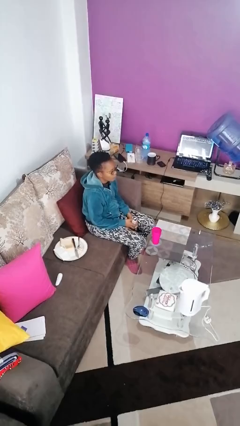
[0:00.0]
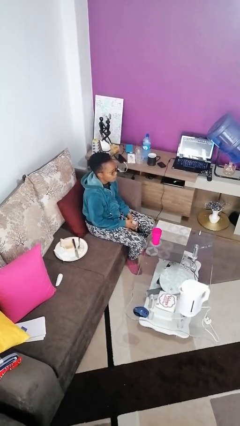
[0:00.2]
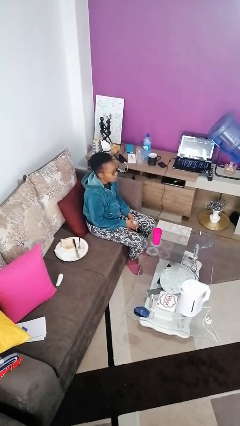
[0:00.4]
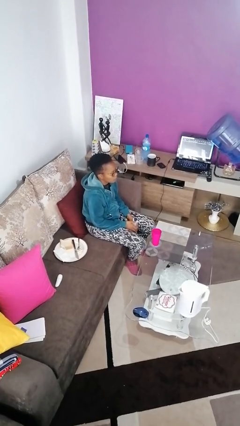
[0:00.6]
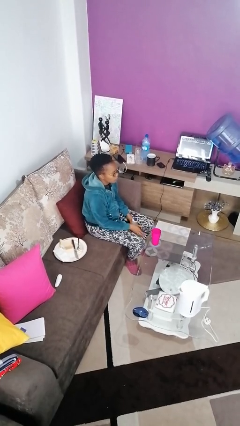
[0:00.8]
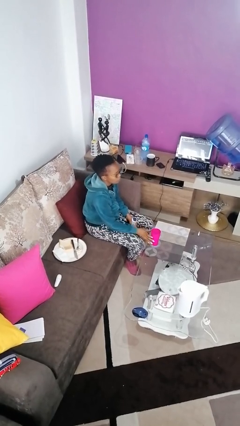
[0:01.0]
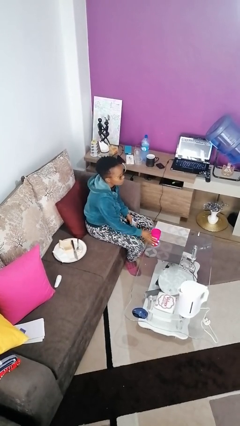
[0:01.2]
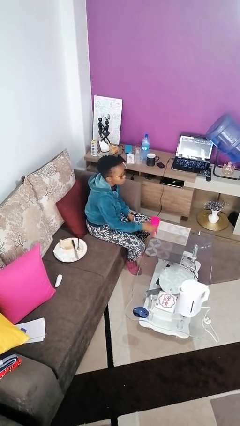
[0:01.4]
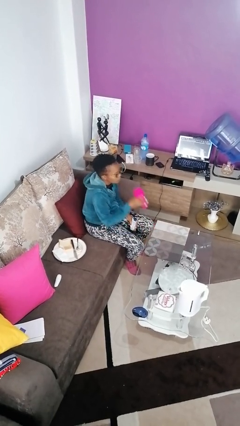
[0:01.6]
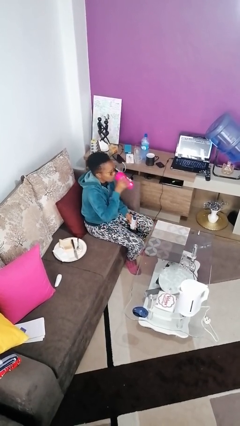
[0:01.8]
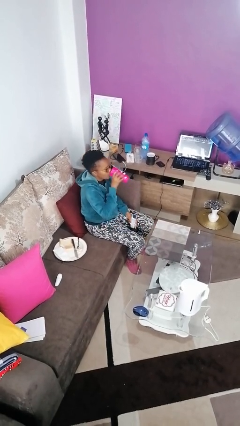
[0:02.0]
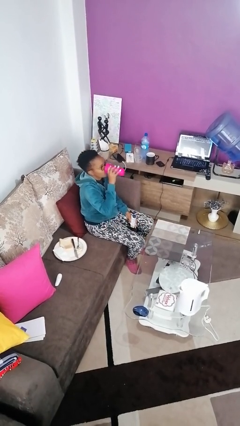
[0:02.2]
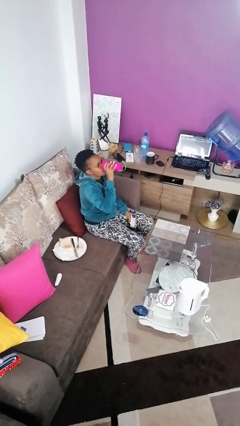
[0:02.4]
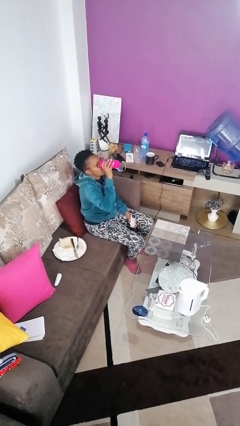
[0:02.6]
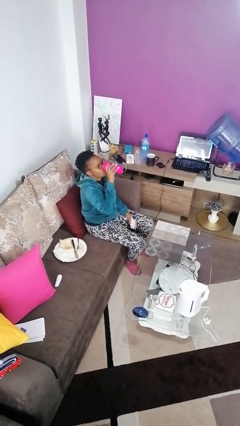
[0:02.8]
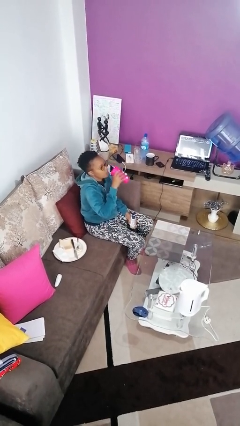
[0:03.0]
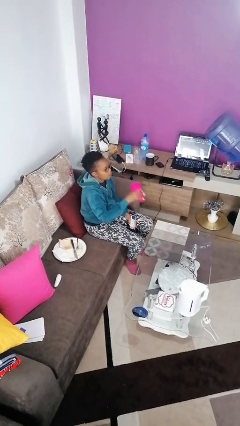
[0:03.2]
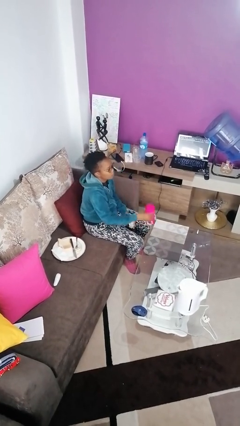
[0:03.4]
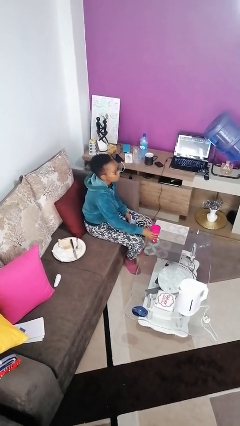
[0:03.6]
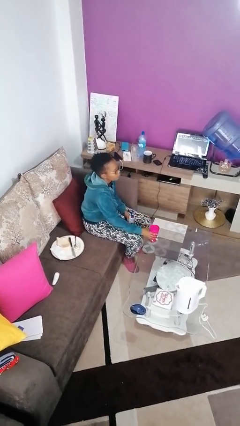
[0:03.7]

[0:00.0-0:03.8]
person drinks from cup

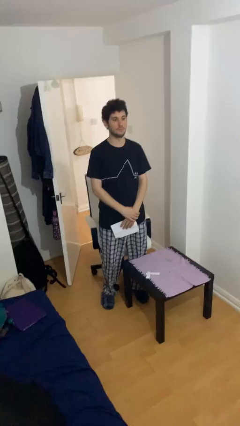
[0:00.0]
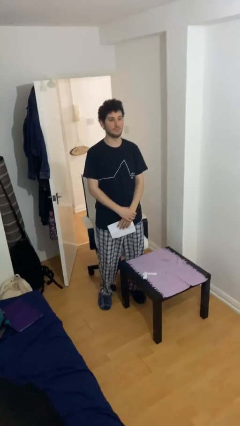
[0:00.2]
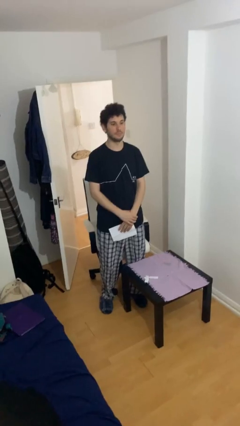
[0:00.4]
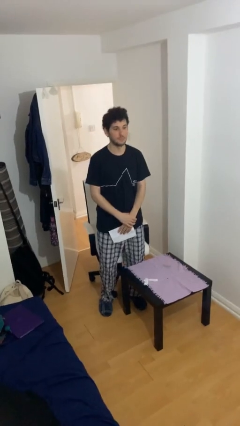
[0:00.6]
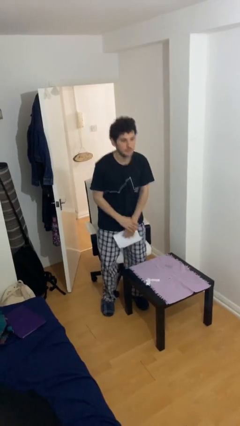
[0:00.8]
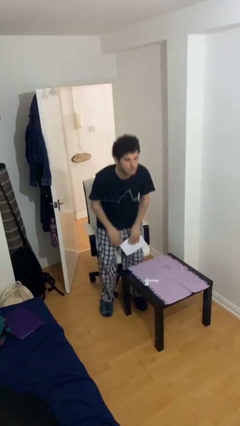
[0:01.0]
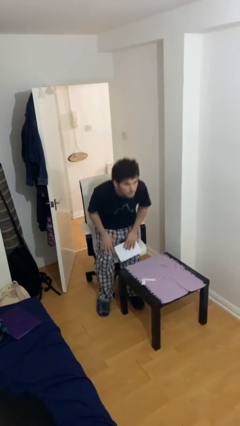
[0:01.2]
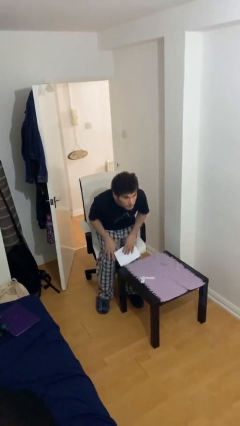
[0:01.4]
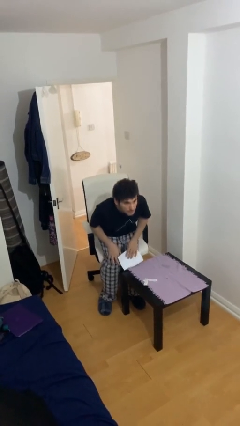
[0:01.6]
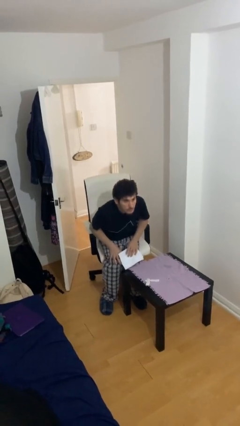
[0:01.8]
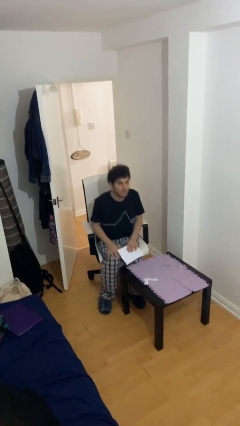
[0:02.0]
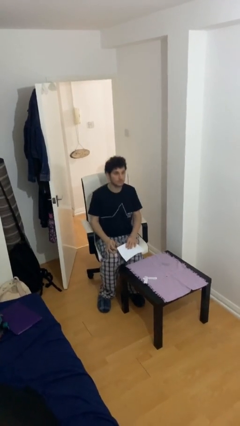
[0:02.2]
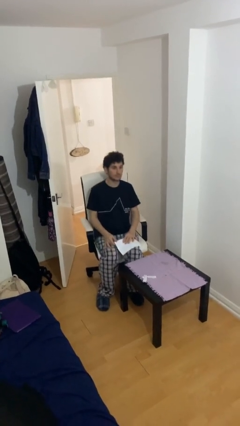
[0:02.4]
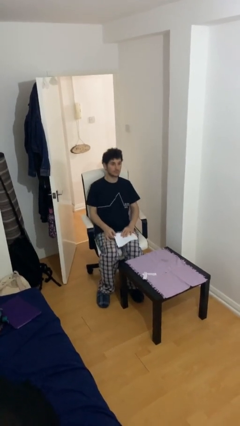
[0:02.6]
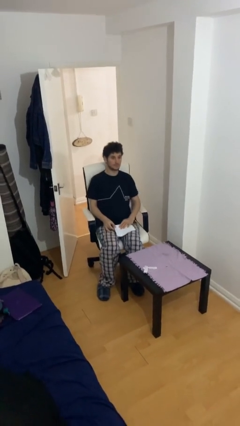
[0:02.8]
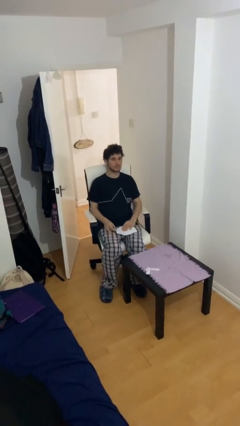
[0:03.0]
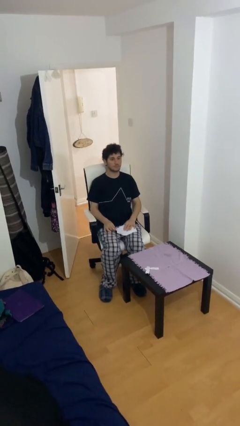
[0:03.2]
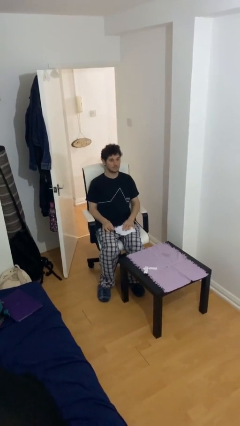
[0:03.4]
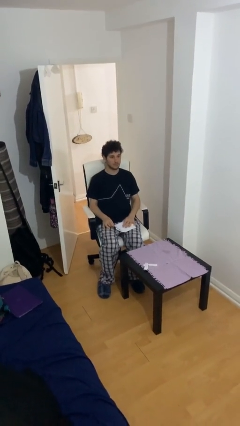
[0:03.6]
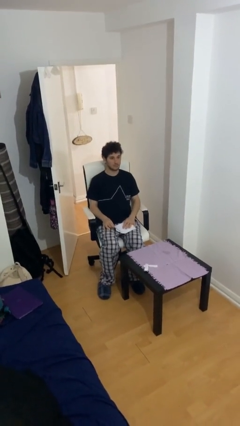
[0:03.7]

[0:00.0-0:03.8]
person sits down

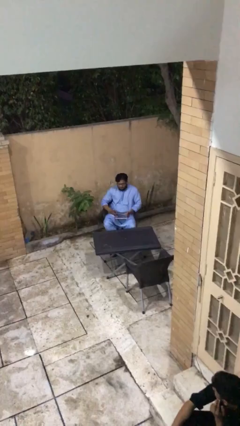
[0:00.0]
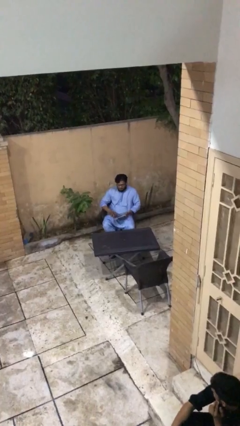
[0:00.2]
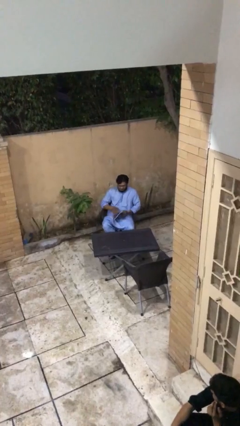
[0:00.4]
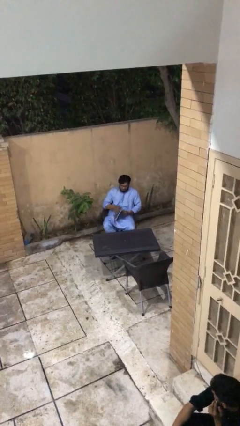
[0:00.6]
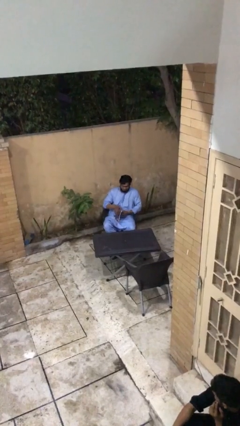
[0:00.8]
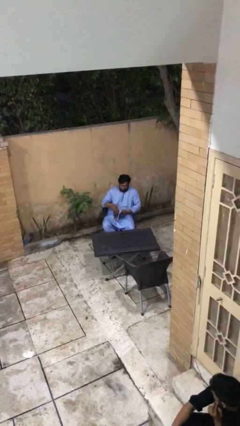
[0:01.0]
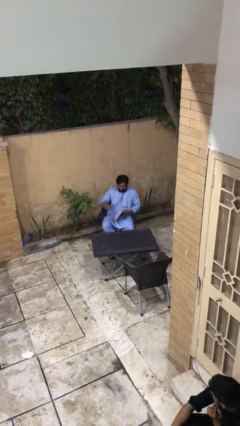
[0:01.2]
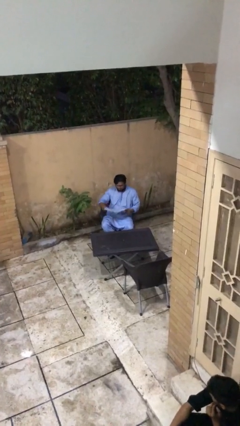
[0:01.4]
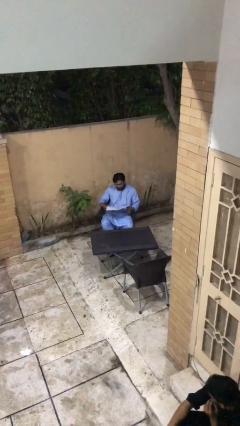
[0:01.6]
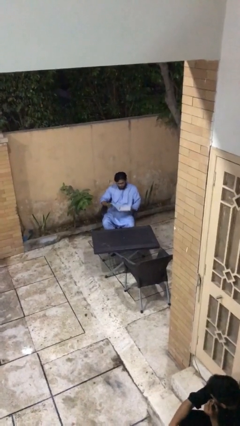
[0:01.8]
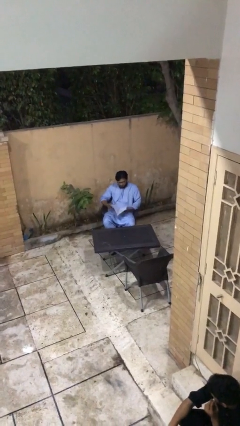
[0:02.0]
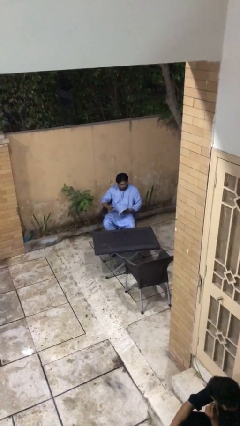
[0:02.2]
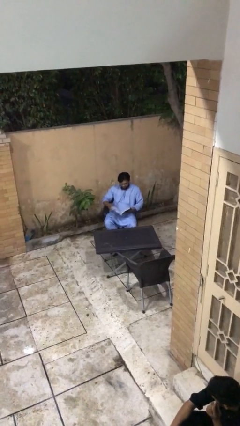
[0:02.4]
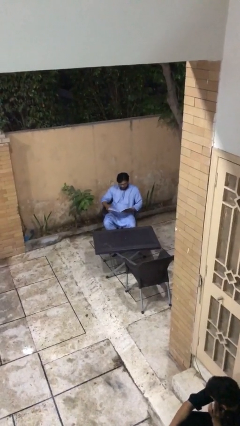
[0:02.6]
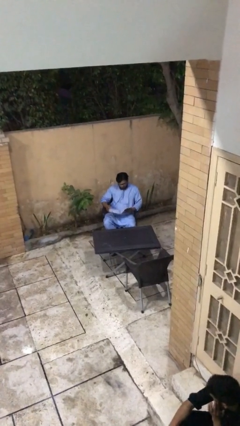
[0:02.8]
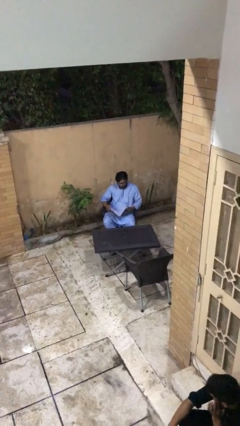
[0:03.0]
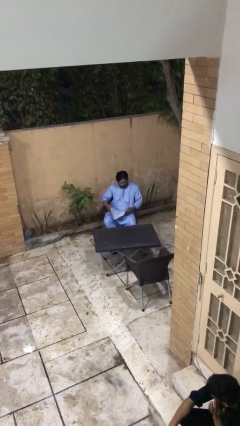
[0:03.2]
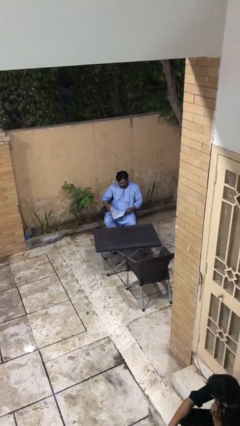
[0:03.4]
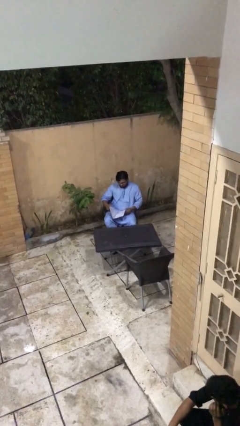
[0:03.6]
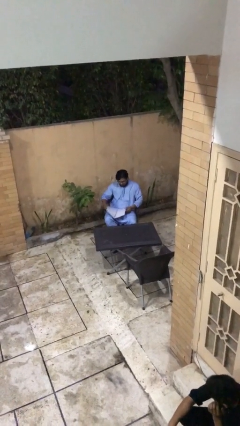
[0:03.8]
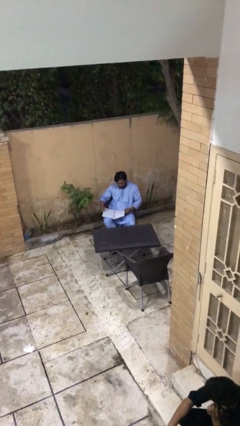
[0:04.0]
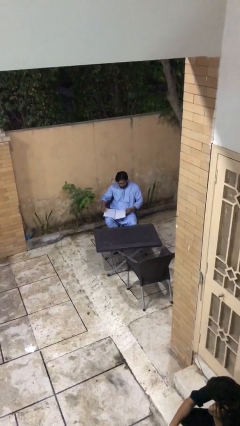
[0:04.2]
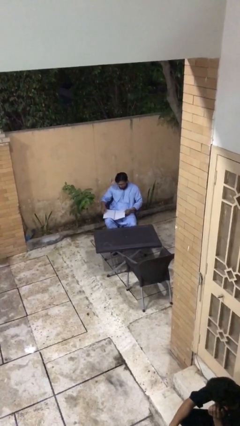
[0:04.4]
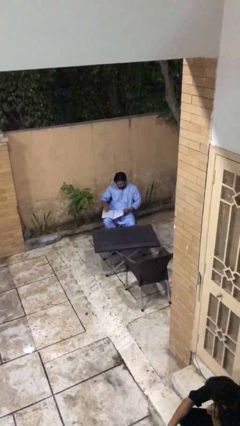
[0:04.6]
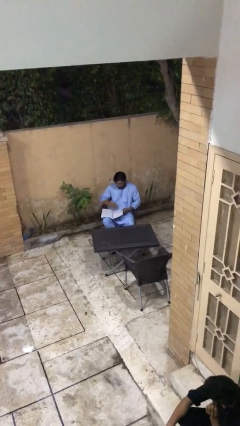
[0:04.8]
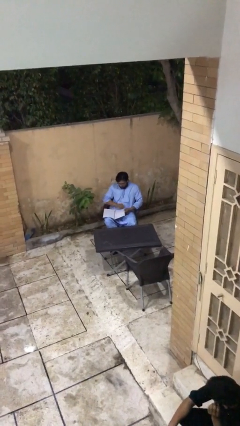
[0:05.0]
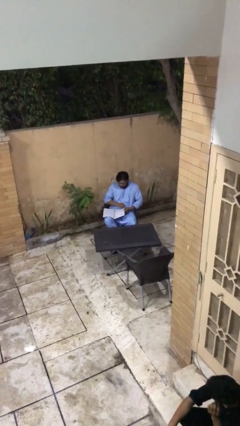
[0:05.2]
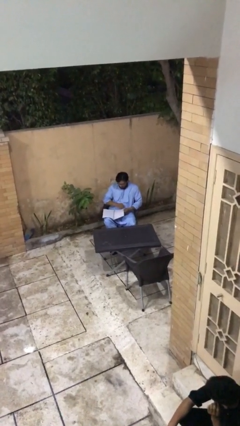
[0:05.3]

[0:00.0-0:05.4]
person reads document

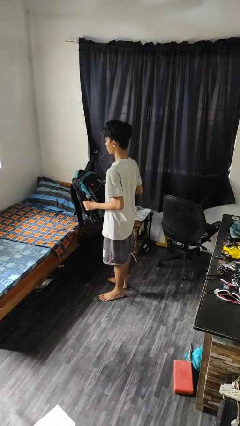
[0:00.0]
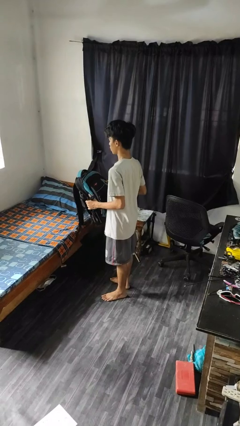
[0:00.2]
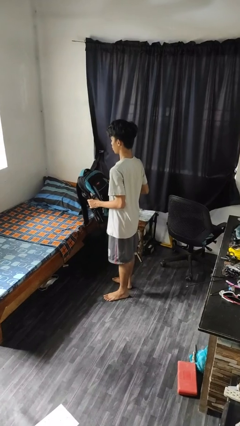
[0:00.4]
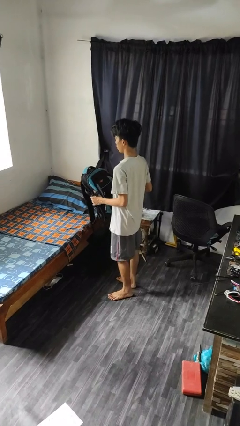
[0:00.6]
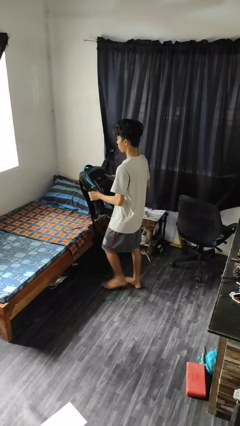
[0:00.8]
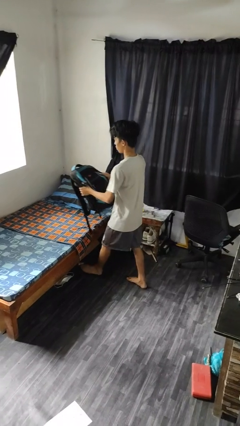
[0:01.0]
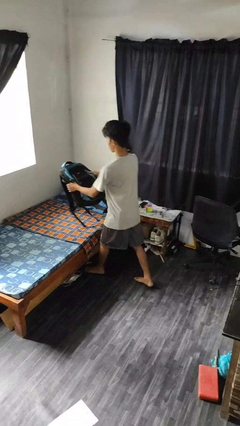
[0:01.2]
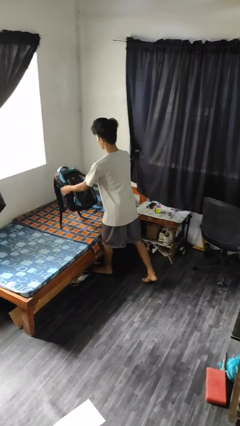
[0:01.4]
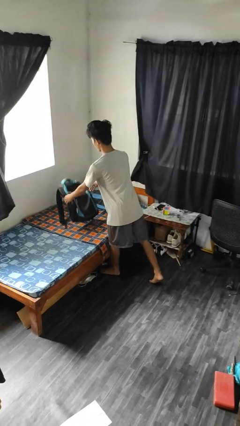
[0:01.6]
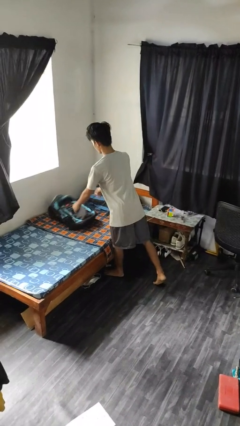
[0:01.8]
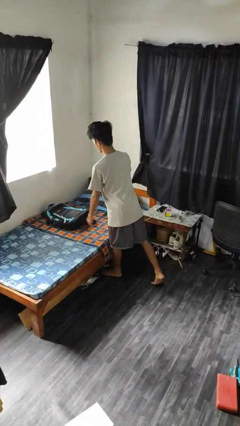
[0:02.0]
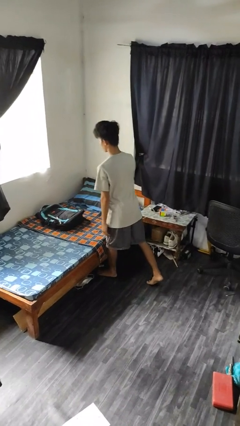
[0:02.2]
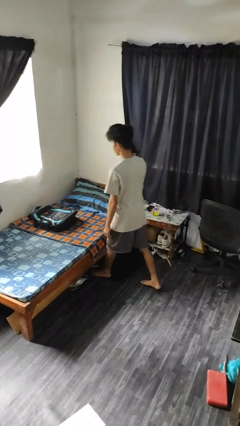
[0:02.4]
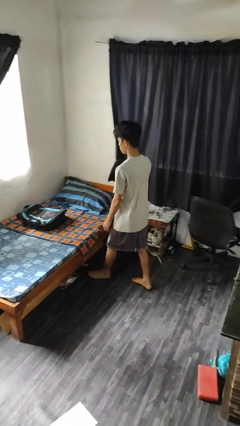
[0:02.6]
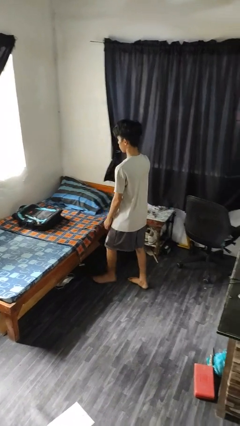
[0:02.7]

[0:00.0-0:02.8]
person puts down object on bed

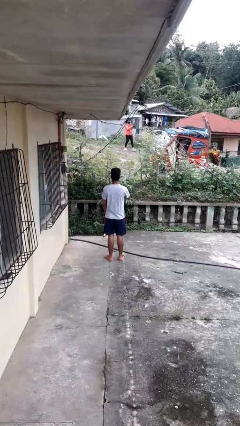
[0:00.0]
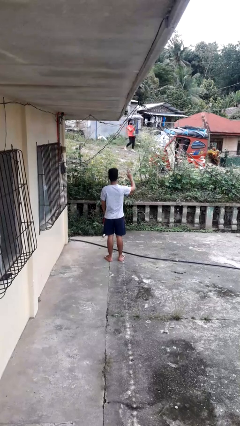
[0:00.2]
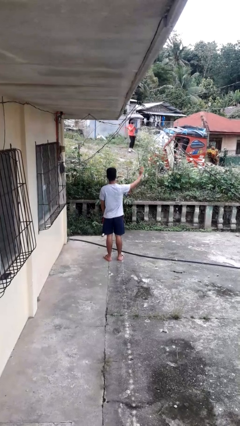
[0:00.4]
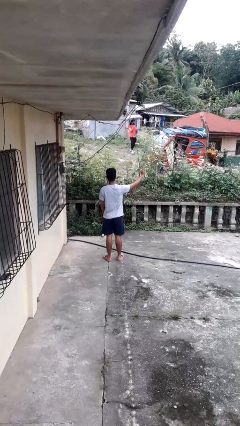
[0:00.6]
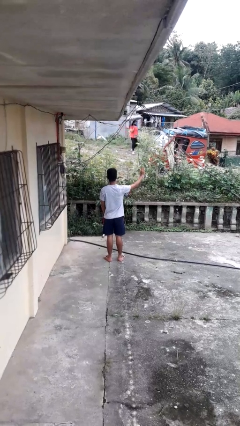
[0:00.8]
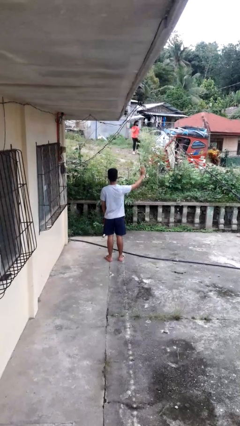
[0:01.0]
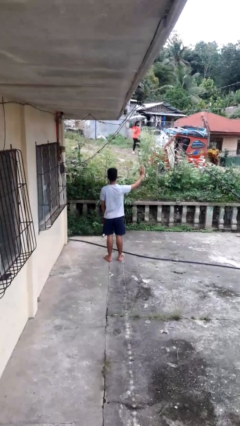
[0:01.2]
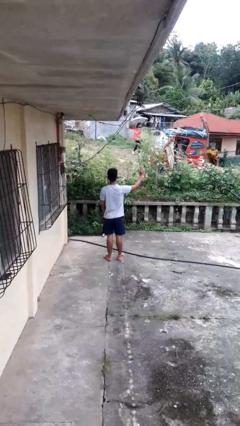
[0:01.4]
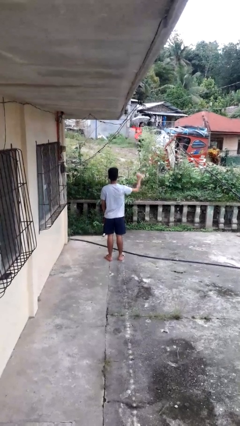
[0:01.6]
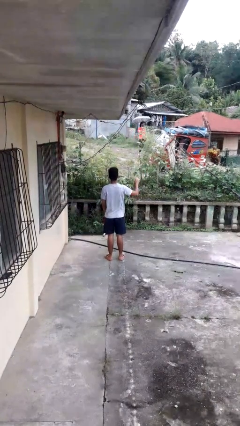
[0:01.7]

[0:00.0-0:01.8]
person gestures swipe right
